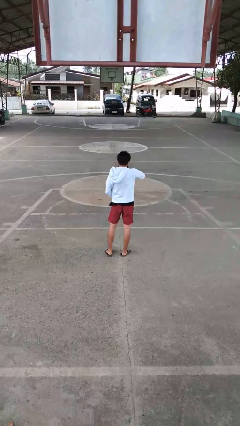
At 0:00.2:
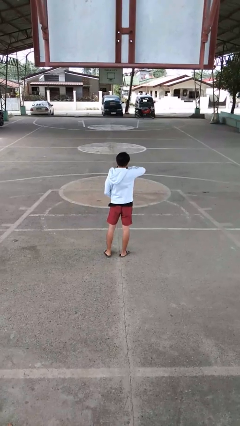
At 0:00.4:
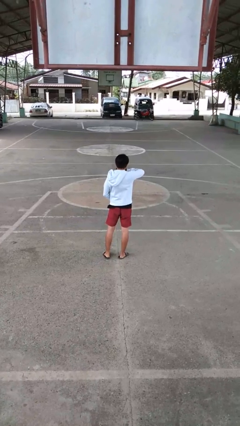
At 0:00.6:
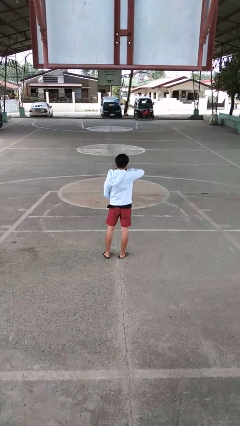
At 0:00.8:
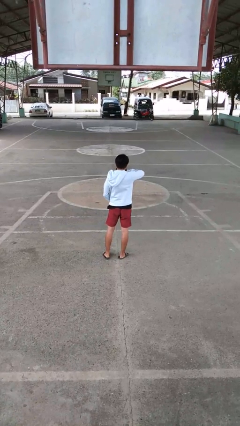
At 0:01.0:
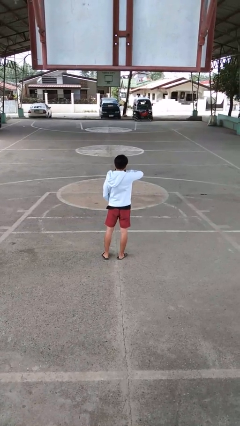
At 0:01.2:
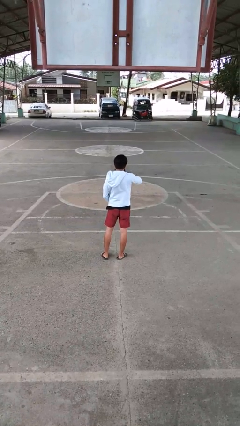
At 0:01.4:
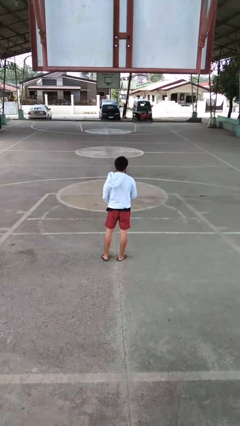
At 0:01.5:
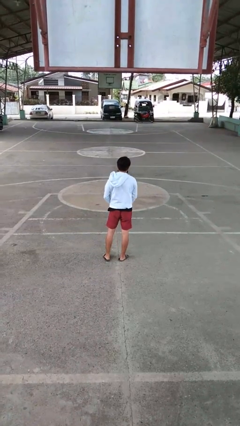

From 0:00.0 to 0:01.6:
person zips up jacket

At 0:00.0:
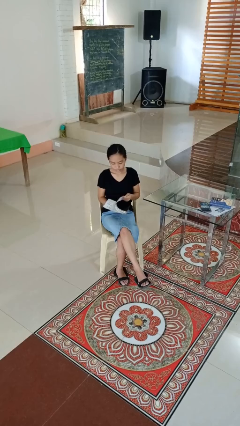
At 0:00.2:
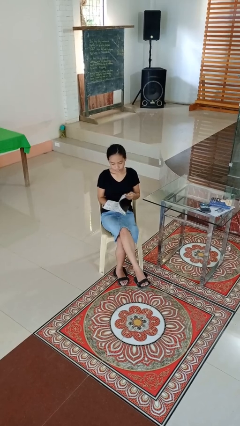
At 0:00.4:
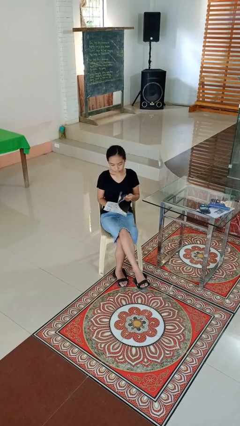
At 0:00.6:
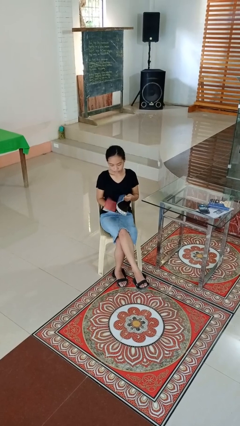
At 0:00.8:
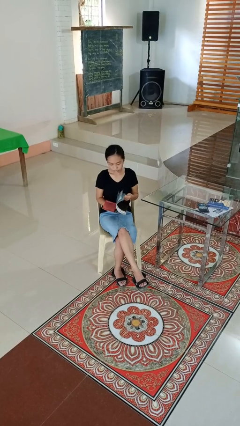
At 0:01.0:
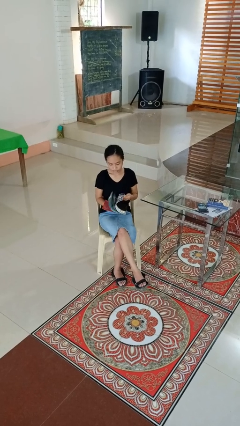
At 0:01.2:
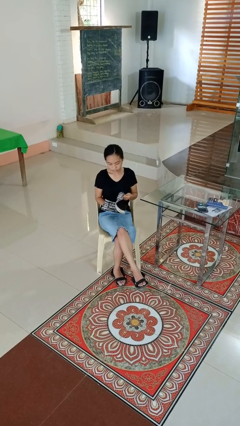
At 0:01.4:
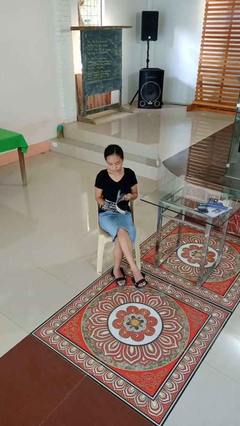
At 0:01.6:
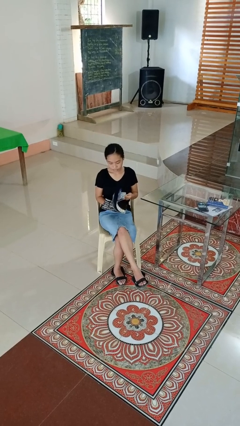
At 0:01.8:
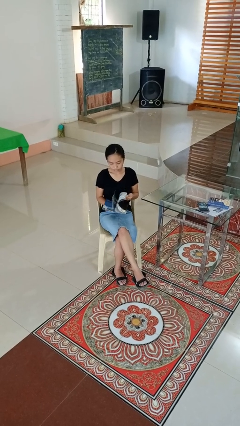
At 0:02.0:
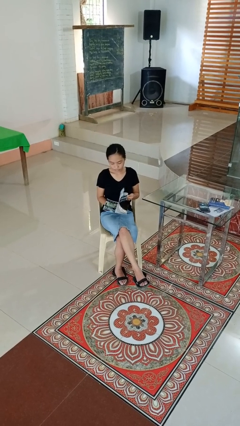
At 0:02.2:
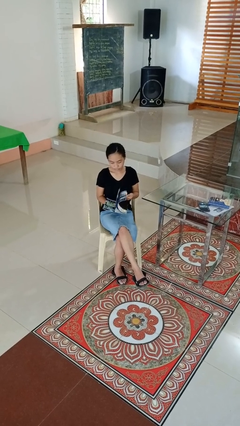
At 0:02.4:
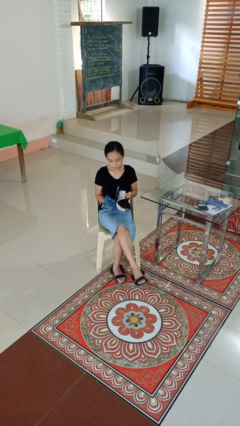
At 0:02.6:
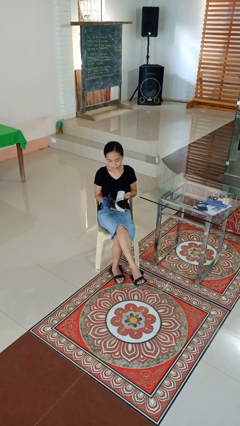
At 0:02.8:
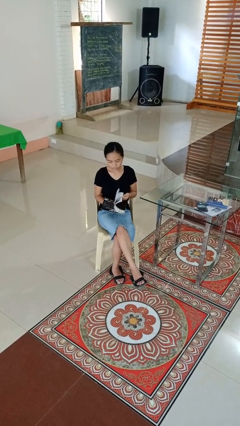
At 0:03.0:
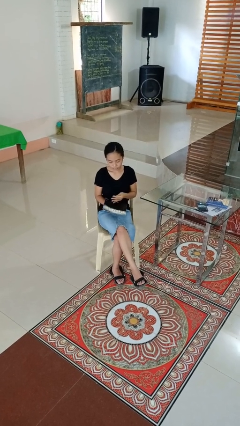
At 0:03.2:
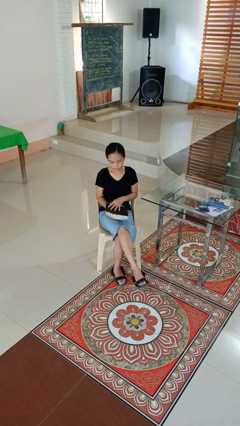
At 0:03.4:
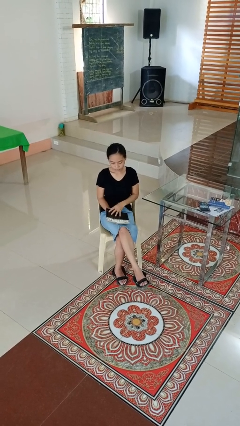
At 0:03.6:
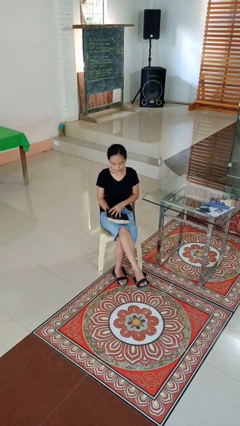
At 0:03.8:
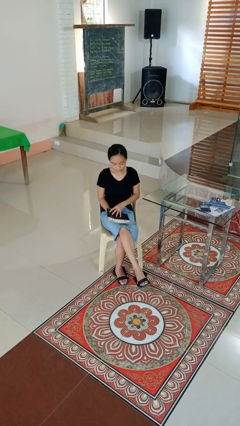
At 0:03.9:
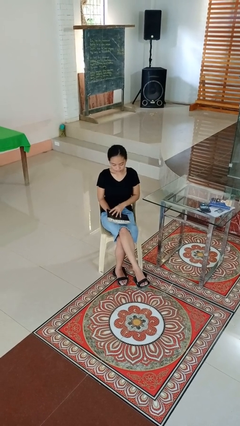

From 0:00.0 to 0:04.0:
person reads magazine

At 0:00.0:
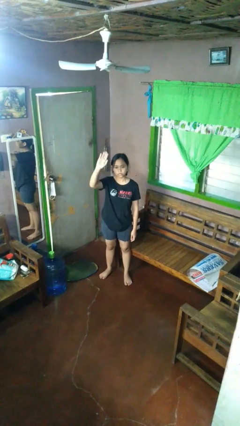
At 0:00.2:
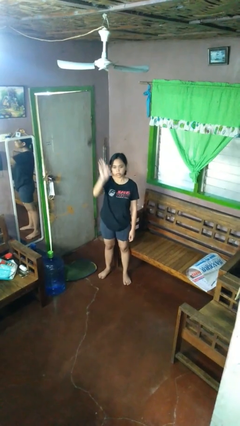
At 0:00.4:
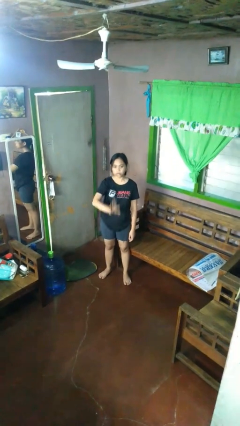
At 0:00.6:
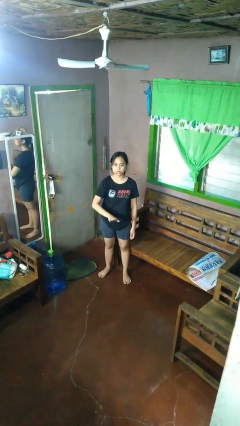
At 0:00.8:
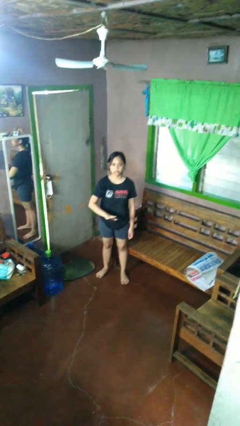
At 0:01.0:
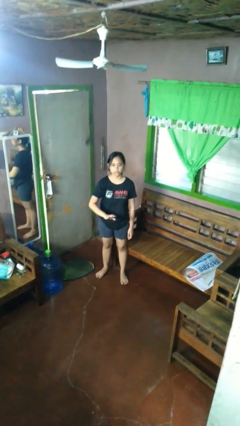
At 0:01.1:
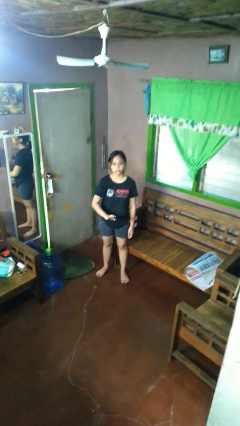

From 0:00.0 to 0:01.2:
person gestures swipe down

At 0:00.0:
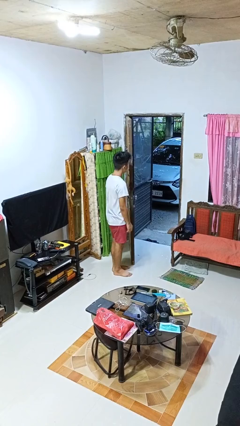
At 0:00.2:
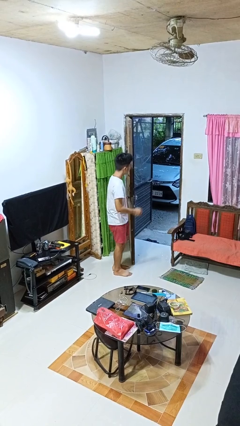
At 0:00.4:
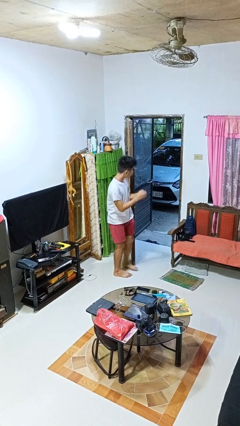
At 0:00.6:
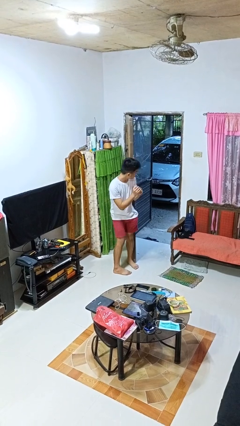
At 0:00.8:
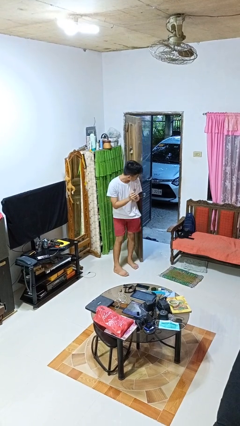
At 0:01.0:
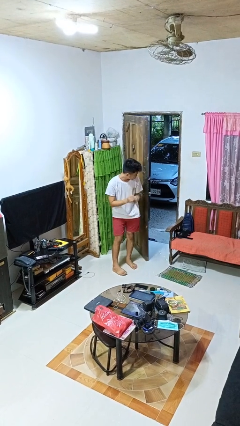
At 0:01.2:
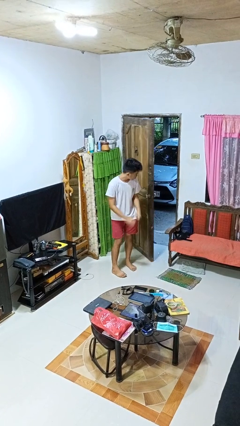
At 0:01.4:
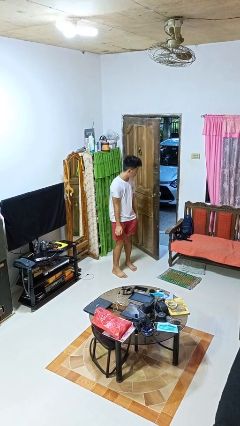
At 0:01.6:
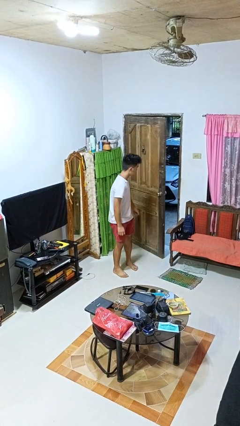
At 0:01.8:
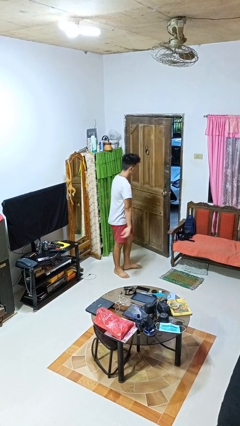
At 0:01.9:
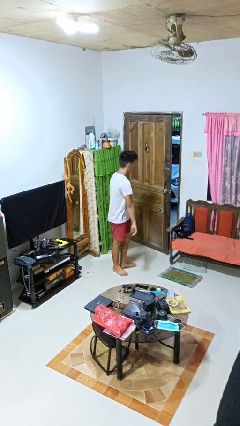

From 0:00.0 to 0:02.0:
person closes door with hip

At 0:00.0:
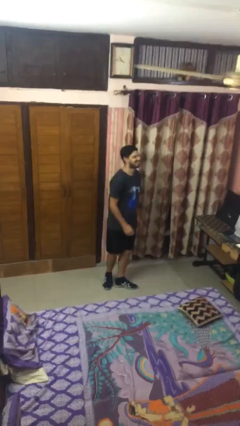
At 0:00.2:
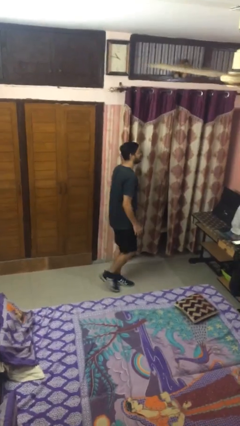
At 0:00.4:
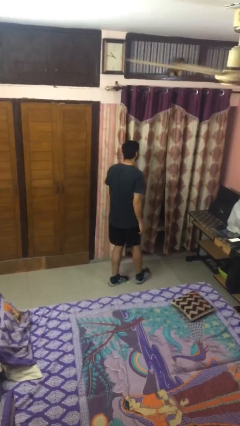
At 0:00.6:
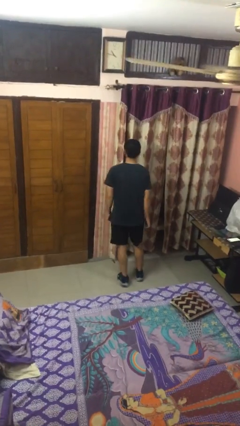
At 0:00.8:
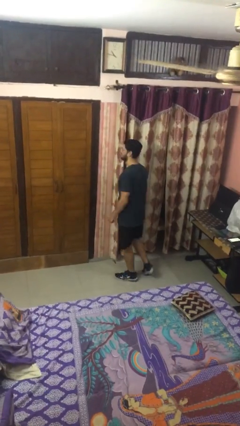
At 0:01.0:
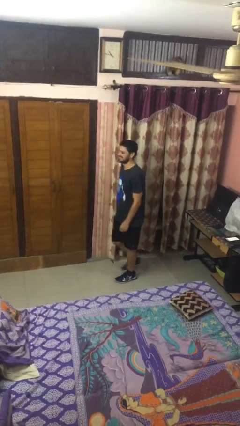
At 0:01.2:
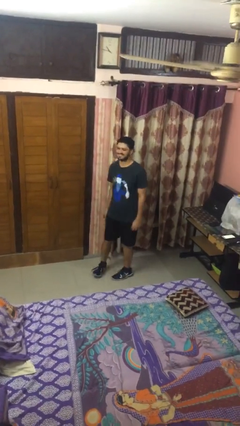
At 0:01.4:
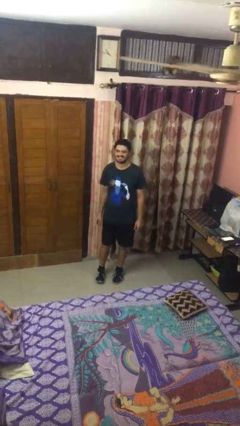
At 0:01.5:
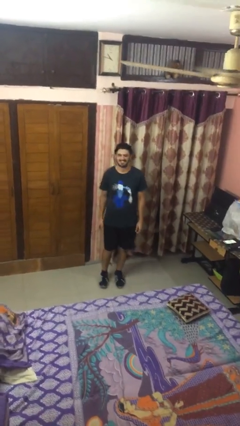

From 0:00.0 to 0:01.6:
person twirls

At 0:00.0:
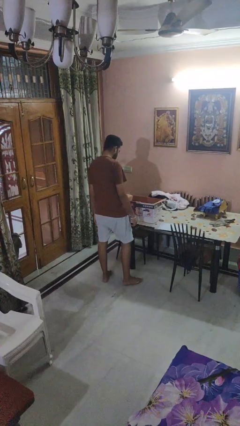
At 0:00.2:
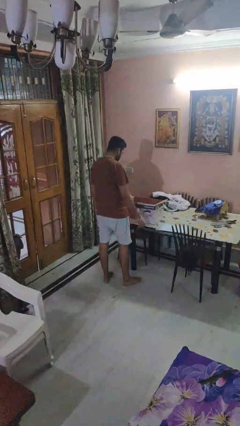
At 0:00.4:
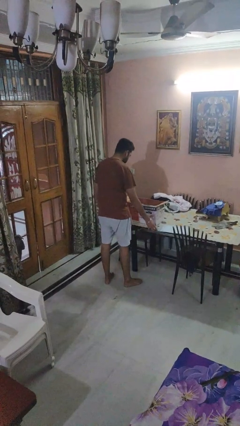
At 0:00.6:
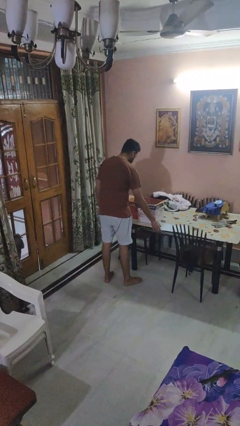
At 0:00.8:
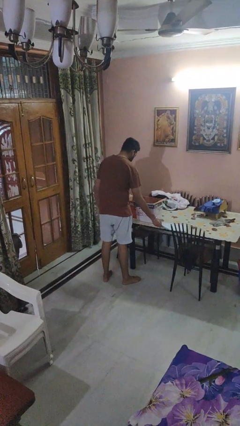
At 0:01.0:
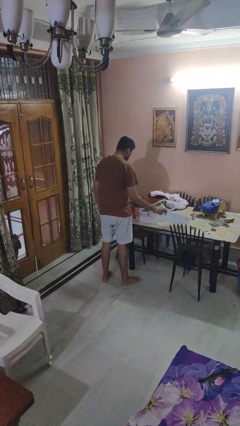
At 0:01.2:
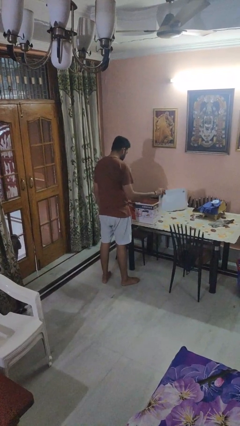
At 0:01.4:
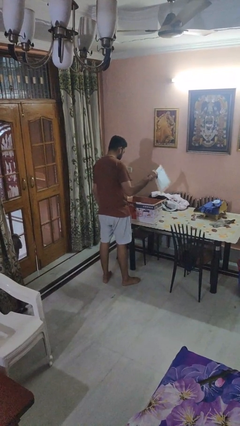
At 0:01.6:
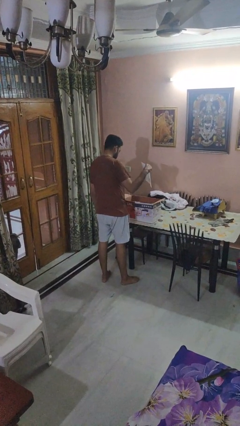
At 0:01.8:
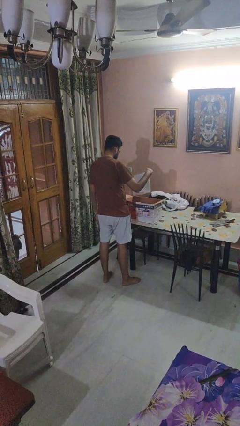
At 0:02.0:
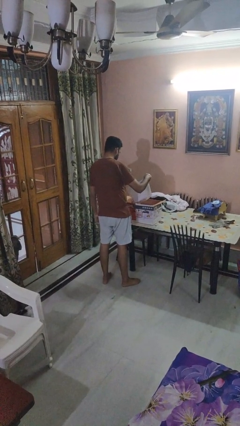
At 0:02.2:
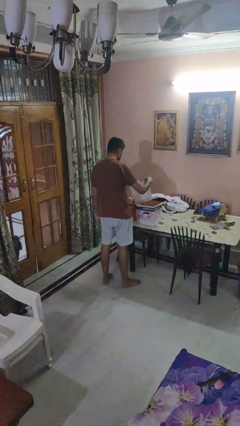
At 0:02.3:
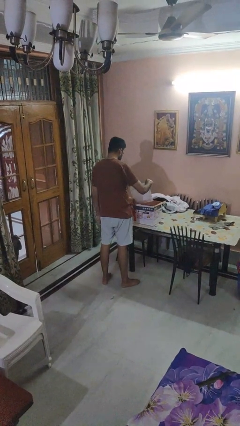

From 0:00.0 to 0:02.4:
person puts object into box

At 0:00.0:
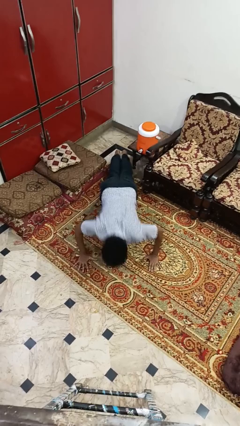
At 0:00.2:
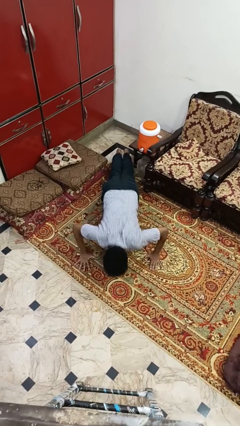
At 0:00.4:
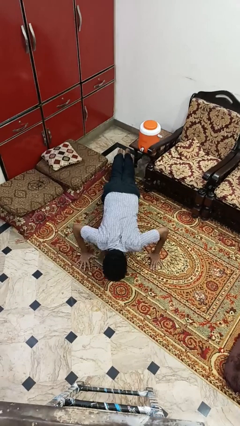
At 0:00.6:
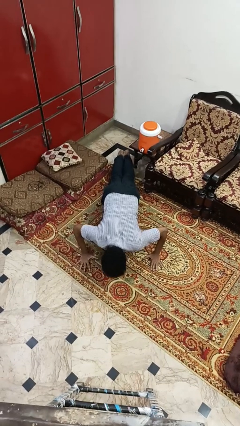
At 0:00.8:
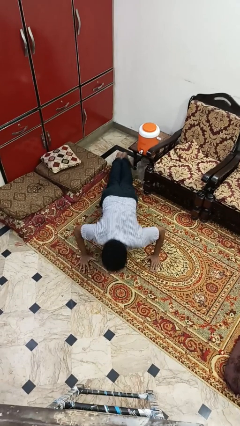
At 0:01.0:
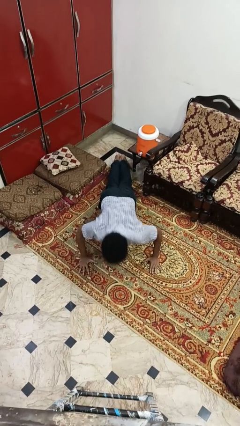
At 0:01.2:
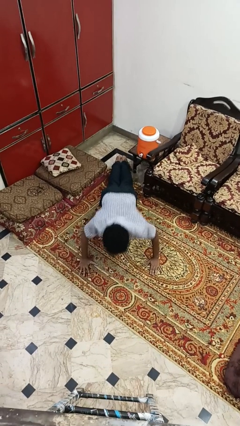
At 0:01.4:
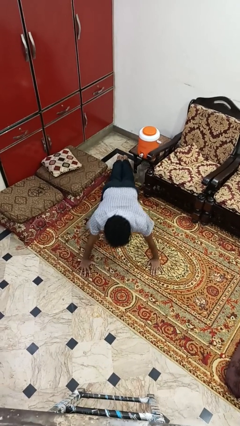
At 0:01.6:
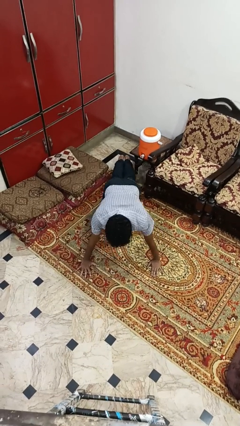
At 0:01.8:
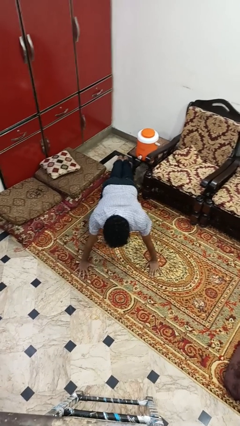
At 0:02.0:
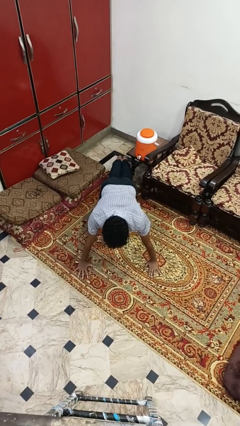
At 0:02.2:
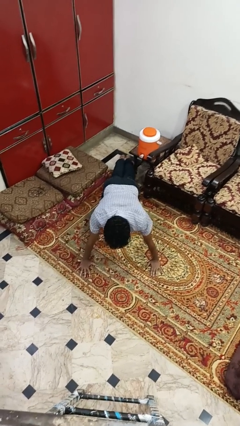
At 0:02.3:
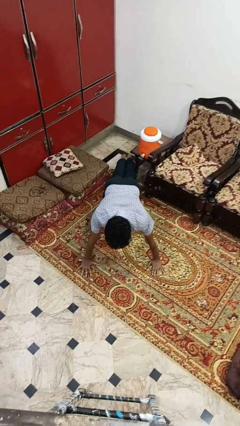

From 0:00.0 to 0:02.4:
person exercises with pushup

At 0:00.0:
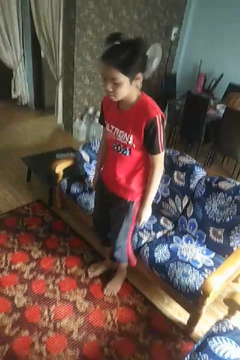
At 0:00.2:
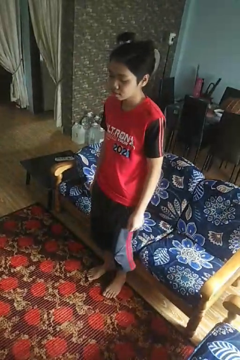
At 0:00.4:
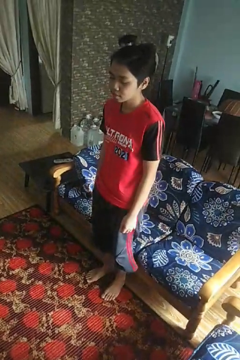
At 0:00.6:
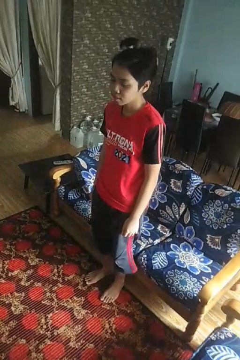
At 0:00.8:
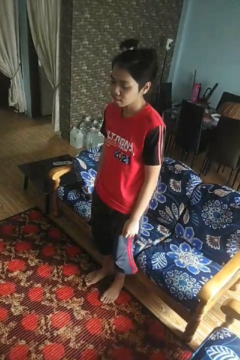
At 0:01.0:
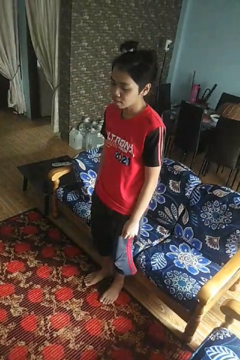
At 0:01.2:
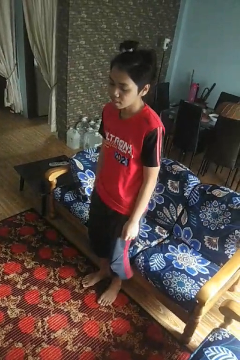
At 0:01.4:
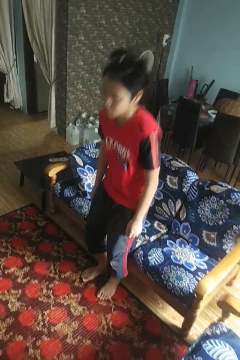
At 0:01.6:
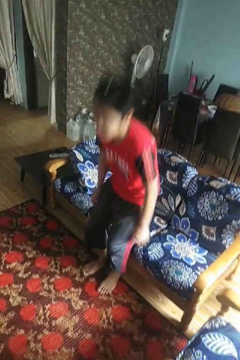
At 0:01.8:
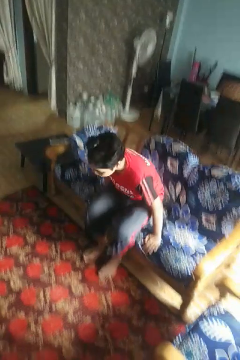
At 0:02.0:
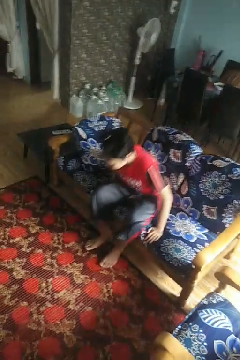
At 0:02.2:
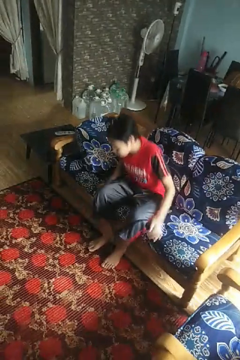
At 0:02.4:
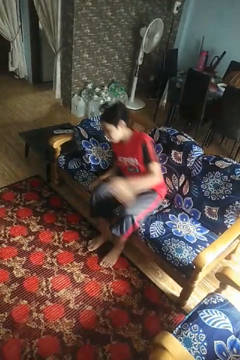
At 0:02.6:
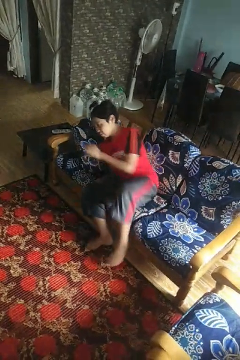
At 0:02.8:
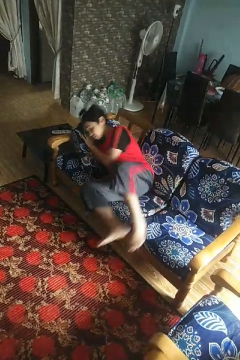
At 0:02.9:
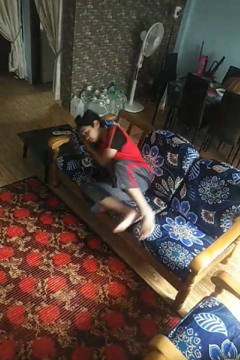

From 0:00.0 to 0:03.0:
person lies down on couch
